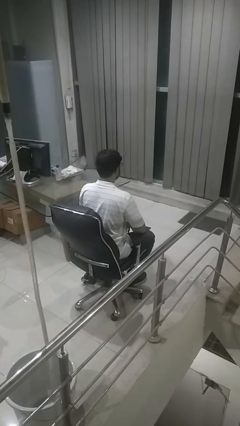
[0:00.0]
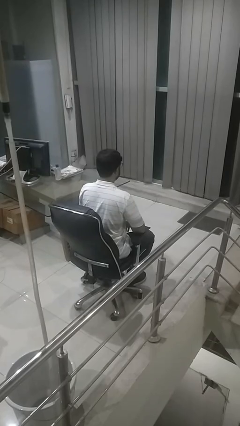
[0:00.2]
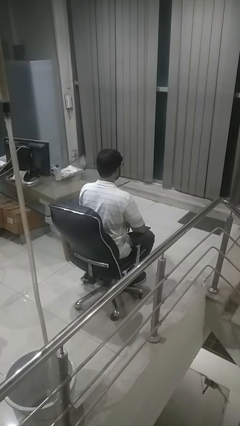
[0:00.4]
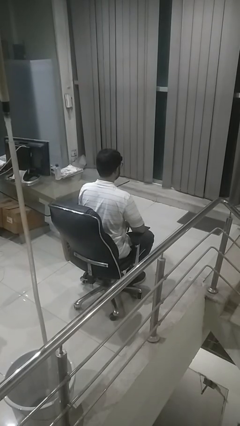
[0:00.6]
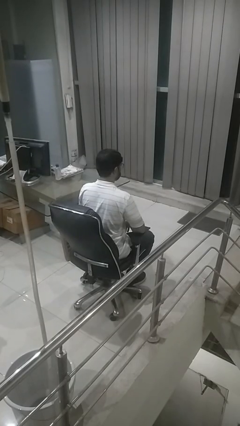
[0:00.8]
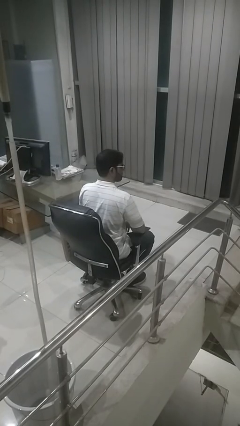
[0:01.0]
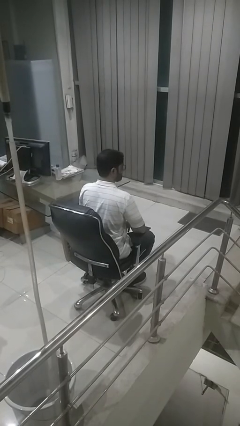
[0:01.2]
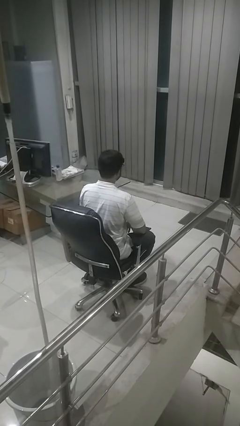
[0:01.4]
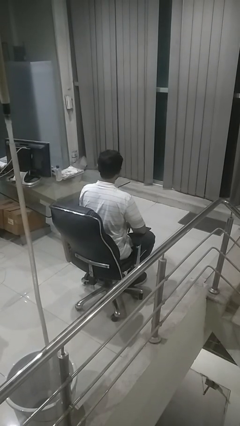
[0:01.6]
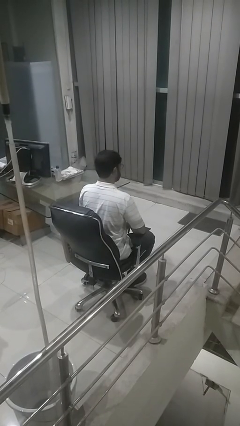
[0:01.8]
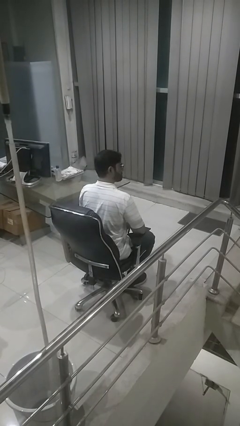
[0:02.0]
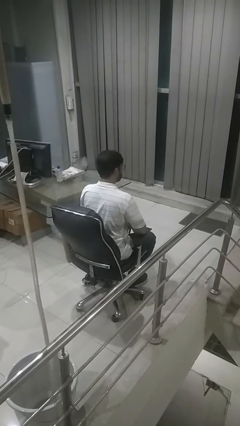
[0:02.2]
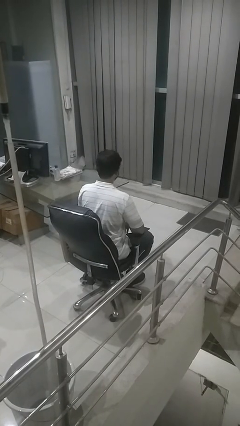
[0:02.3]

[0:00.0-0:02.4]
person shakes head

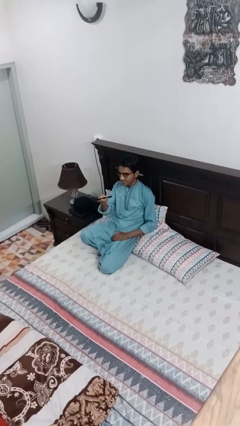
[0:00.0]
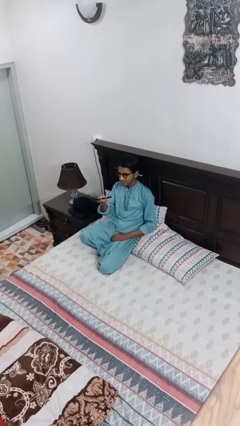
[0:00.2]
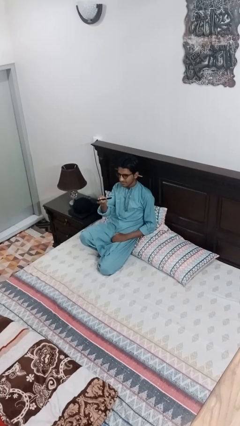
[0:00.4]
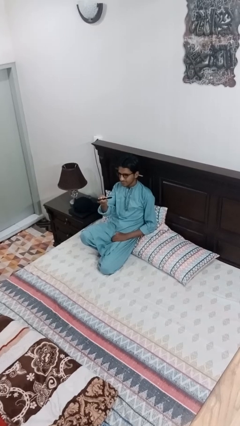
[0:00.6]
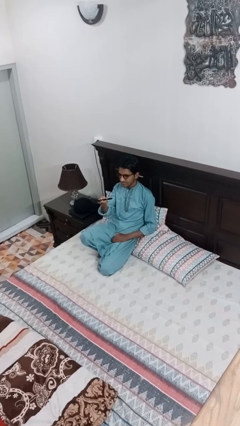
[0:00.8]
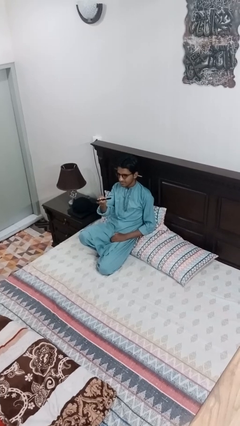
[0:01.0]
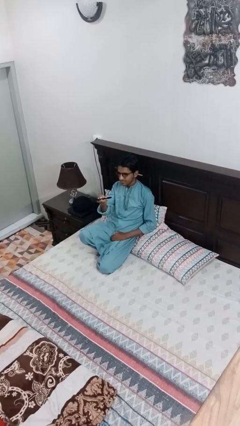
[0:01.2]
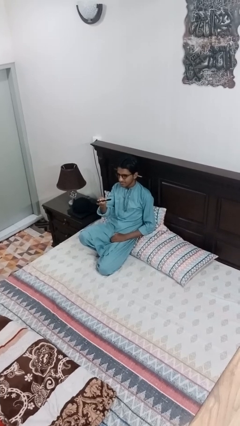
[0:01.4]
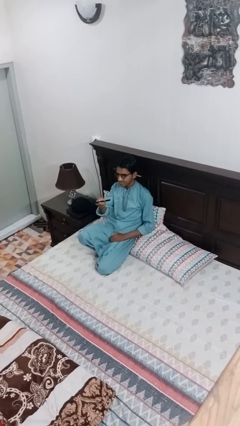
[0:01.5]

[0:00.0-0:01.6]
person uses television remote

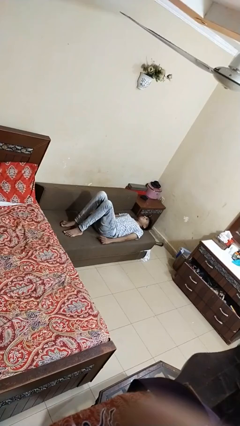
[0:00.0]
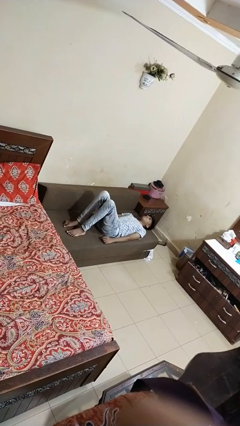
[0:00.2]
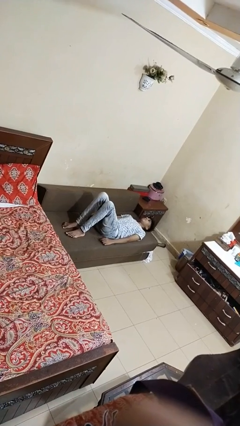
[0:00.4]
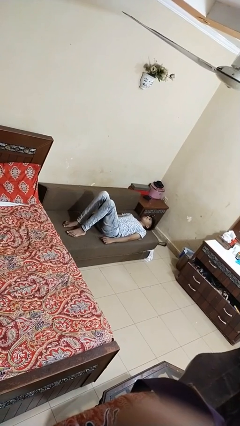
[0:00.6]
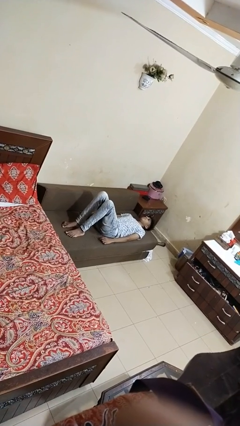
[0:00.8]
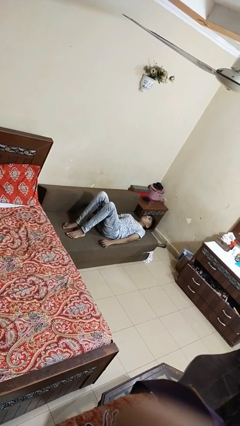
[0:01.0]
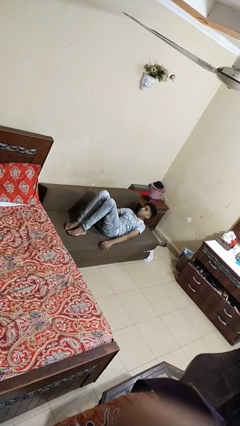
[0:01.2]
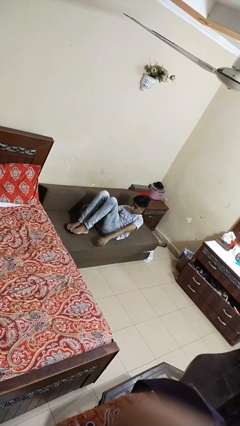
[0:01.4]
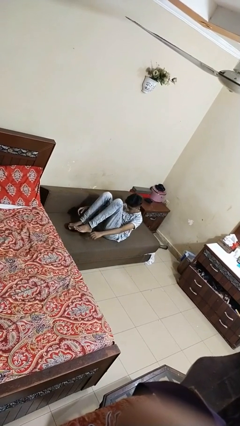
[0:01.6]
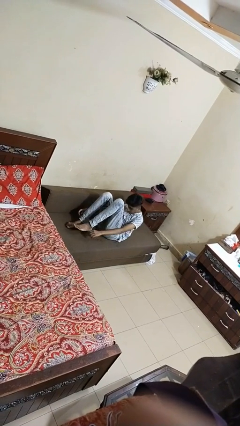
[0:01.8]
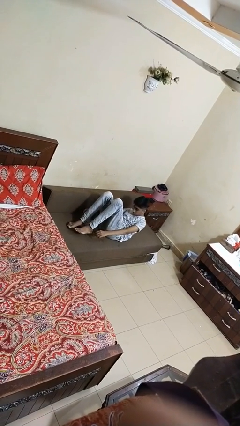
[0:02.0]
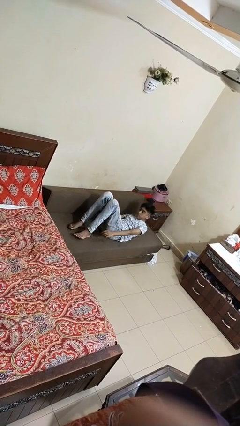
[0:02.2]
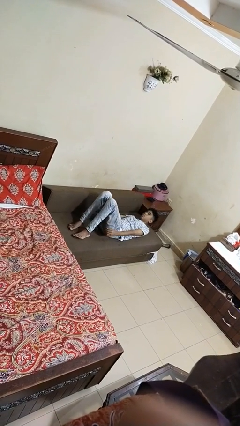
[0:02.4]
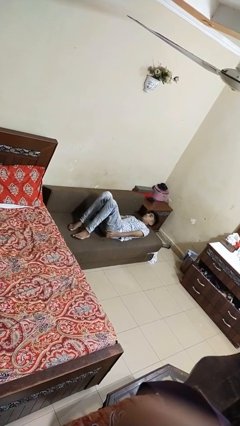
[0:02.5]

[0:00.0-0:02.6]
person exercises with situp

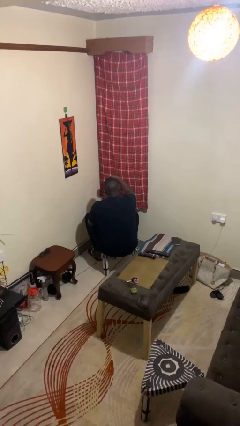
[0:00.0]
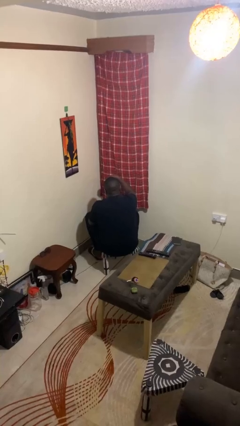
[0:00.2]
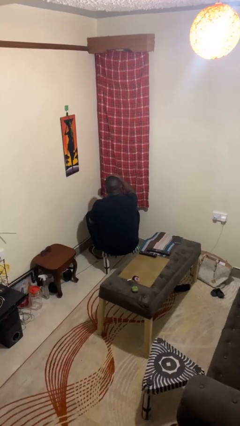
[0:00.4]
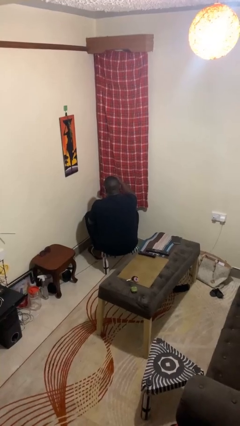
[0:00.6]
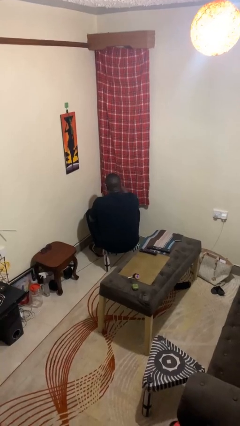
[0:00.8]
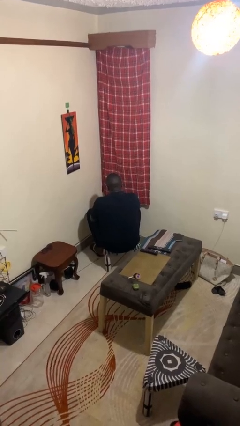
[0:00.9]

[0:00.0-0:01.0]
person gestures swipe down

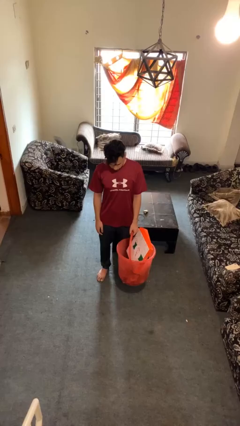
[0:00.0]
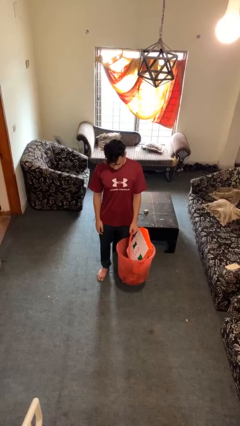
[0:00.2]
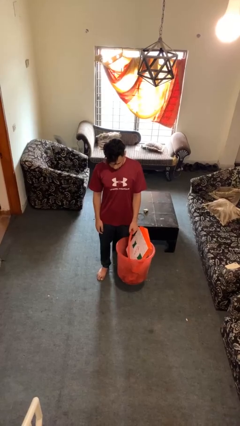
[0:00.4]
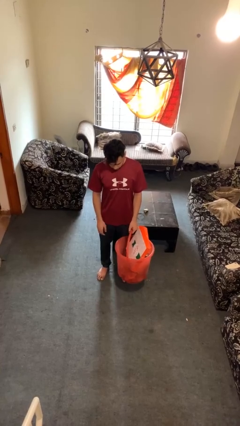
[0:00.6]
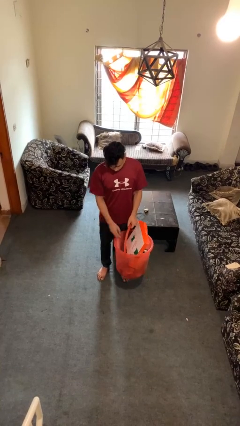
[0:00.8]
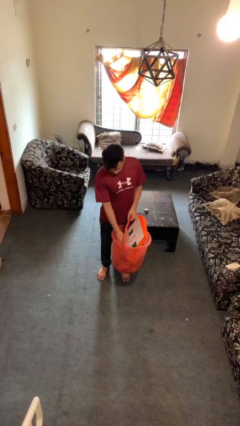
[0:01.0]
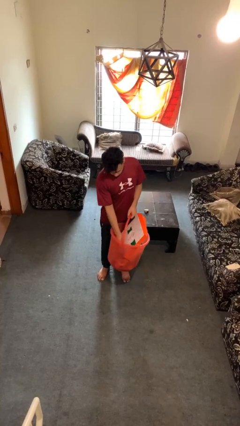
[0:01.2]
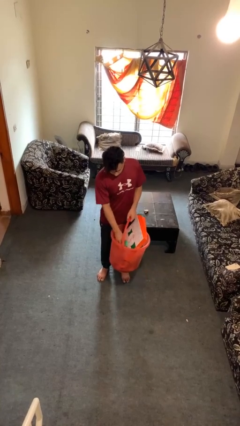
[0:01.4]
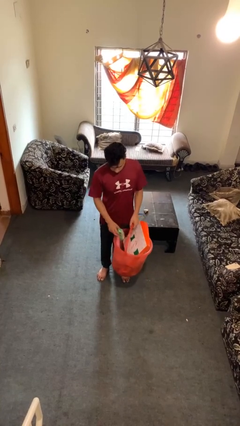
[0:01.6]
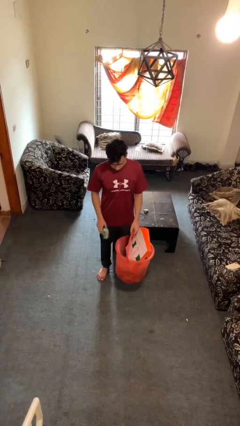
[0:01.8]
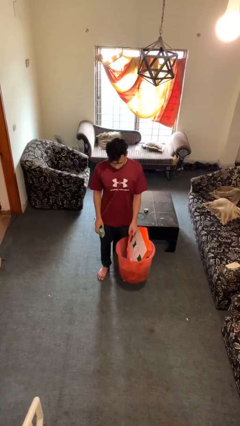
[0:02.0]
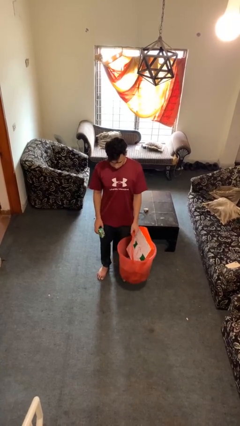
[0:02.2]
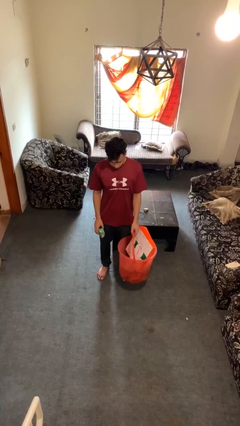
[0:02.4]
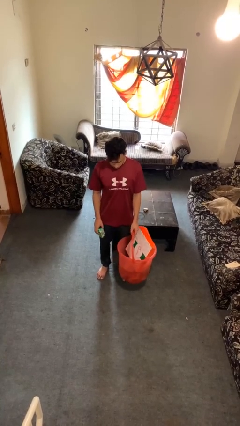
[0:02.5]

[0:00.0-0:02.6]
person takes object from basket

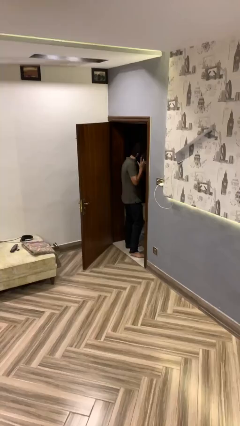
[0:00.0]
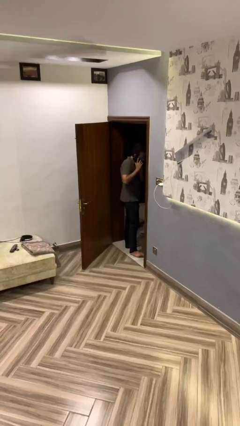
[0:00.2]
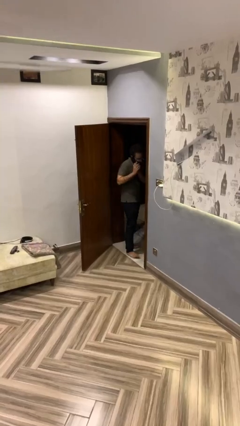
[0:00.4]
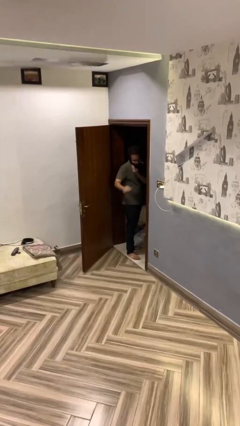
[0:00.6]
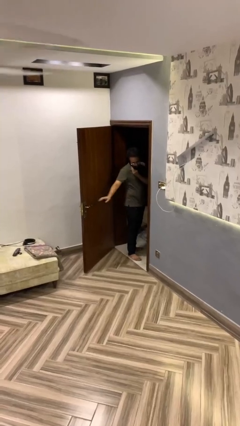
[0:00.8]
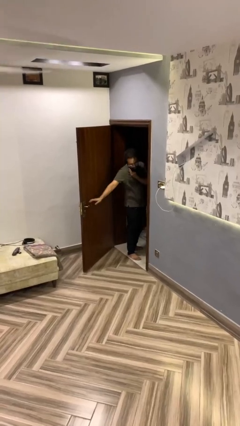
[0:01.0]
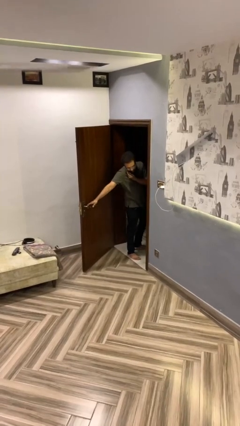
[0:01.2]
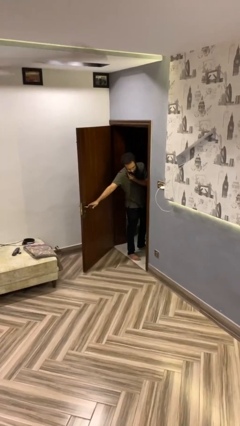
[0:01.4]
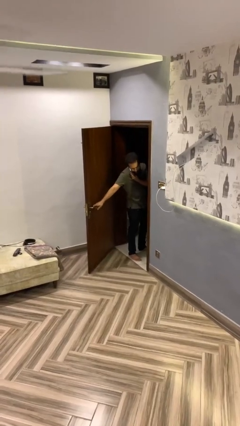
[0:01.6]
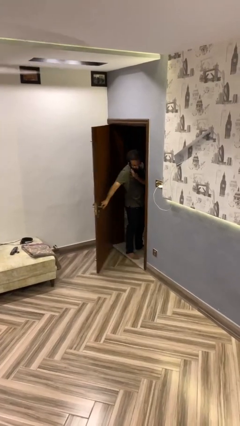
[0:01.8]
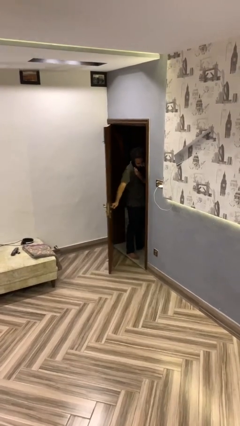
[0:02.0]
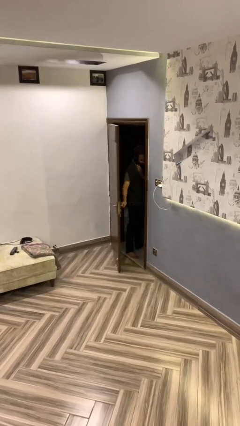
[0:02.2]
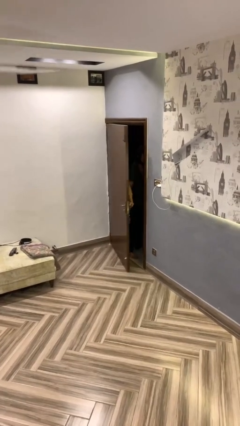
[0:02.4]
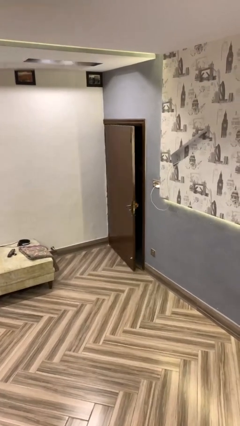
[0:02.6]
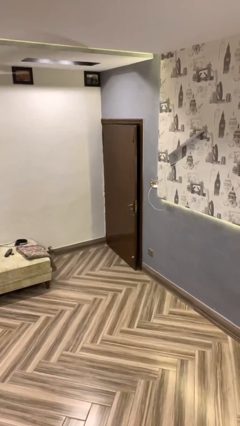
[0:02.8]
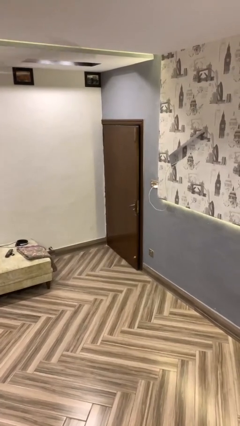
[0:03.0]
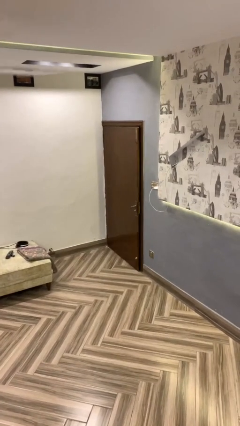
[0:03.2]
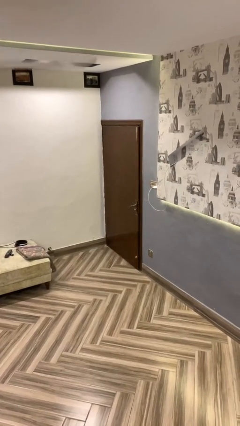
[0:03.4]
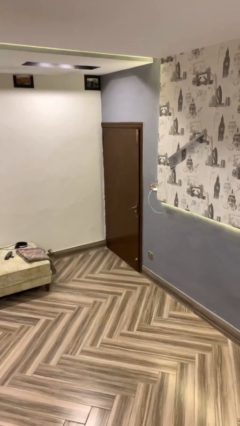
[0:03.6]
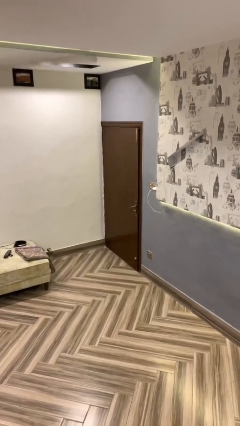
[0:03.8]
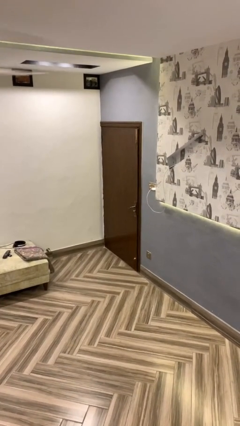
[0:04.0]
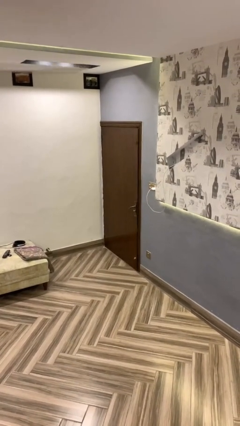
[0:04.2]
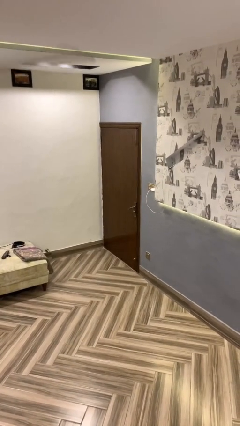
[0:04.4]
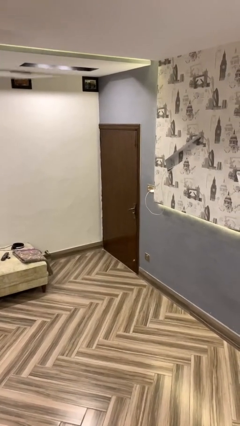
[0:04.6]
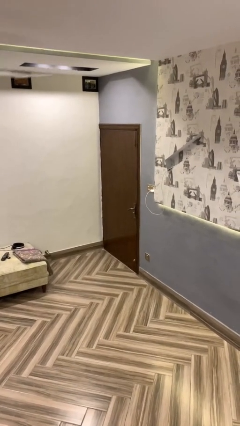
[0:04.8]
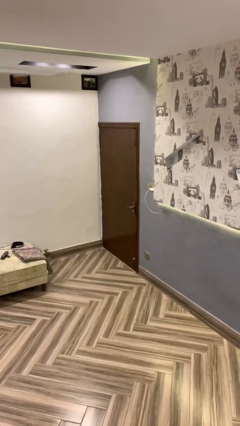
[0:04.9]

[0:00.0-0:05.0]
person closes facility door

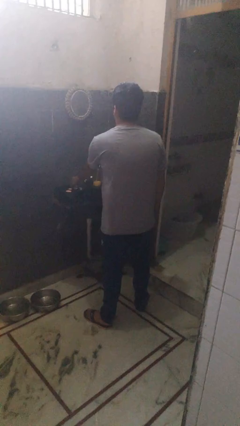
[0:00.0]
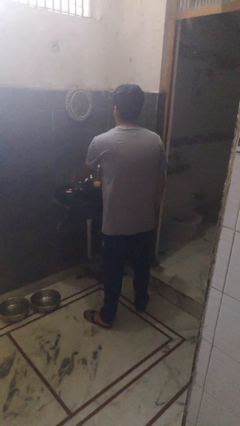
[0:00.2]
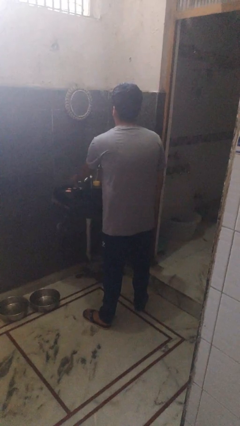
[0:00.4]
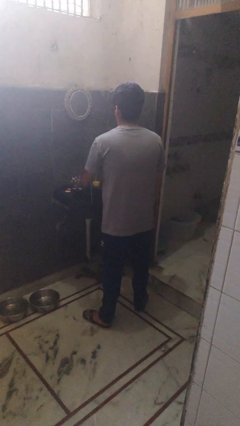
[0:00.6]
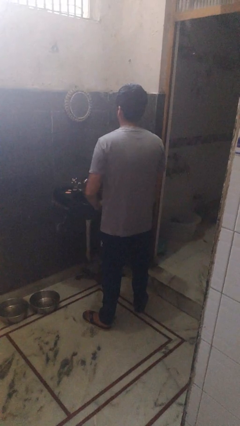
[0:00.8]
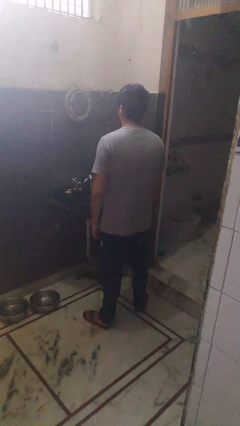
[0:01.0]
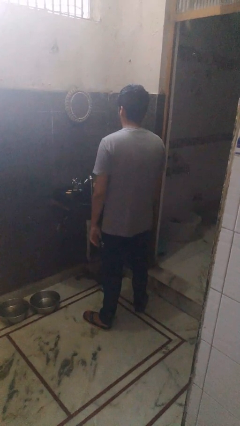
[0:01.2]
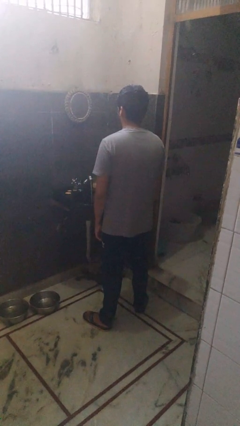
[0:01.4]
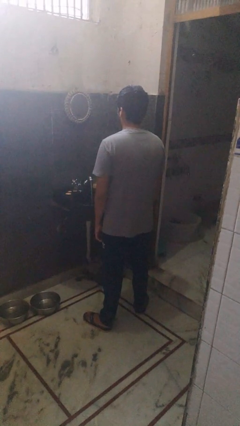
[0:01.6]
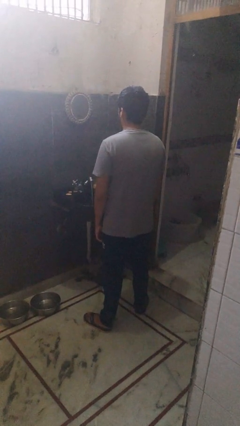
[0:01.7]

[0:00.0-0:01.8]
person turns on faucet

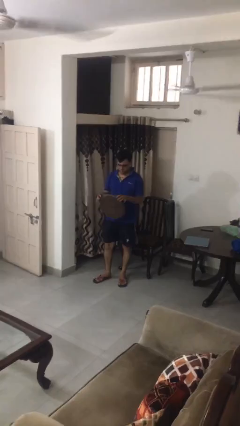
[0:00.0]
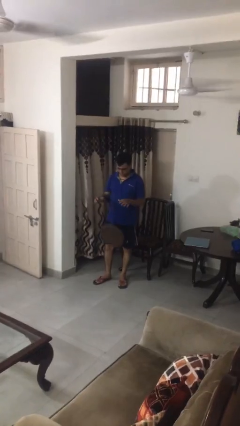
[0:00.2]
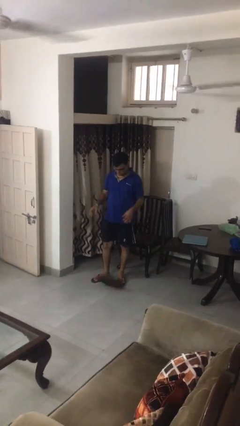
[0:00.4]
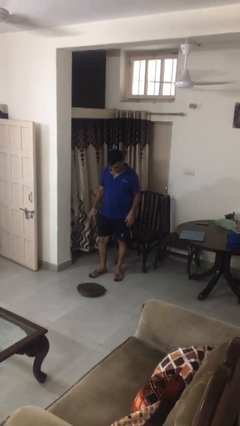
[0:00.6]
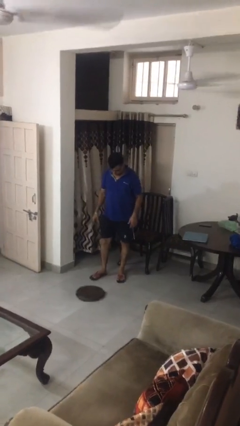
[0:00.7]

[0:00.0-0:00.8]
person drops object
